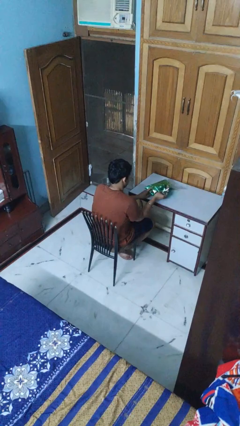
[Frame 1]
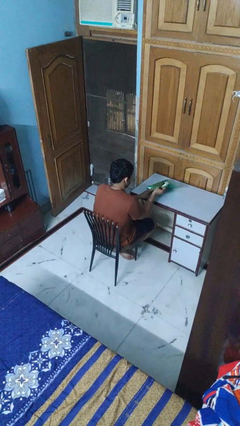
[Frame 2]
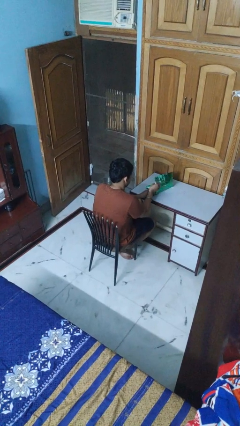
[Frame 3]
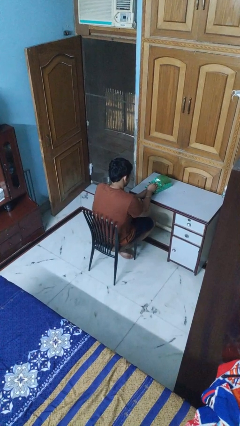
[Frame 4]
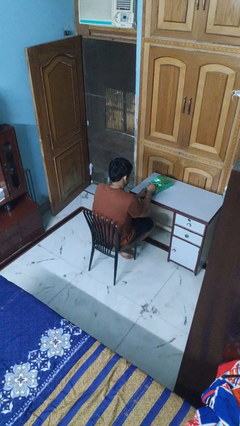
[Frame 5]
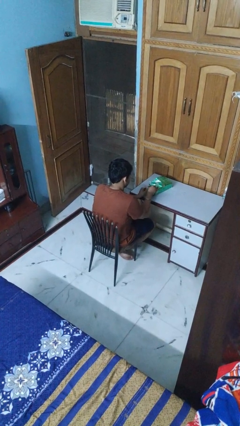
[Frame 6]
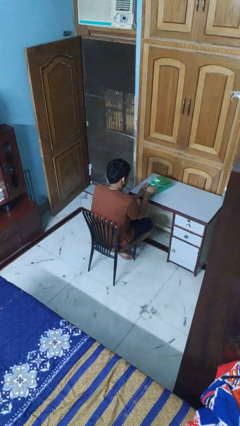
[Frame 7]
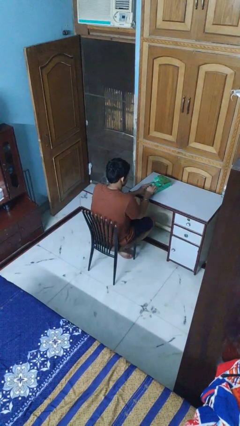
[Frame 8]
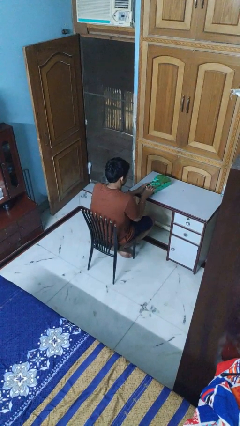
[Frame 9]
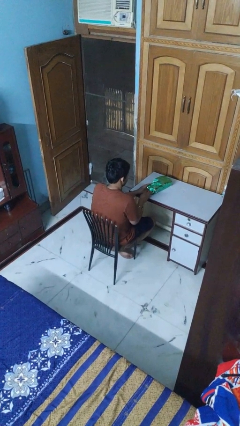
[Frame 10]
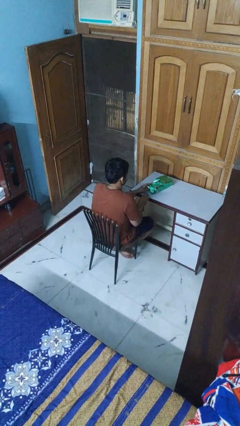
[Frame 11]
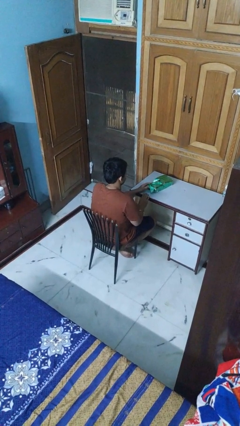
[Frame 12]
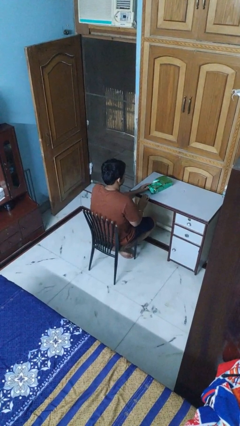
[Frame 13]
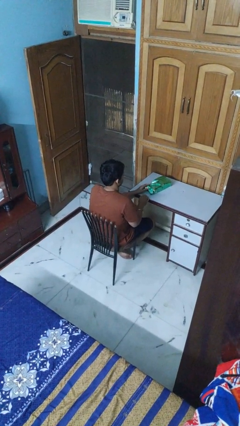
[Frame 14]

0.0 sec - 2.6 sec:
person wraps box

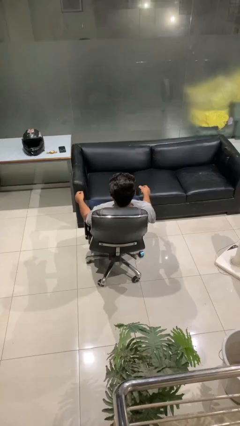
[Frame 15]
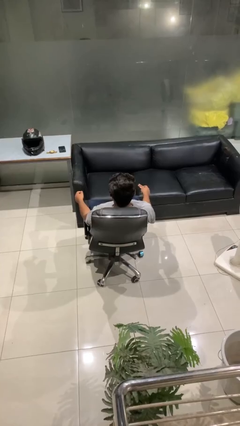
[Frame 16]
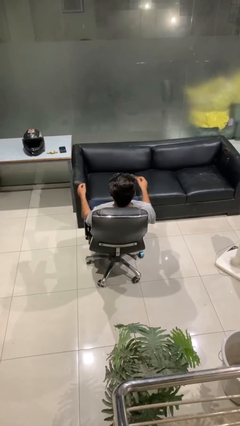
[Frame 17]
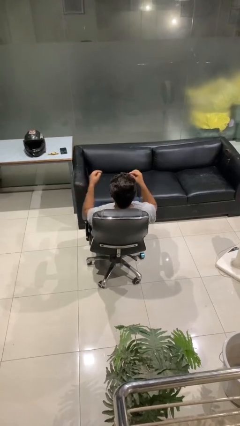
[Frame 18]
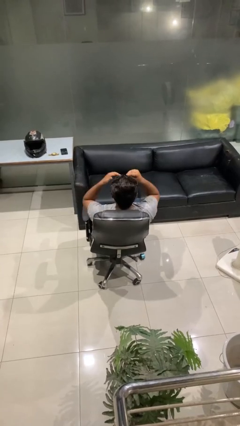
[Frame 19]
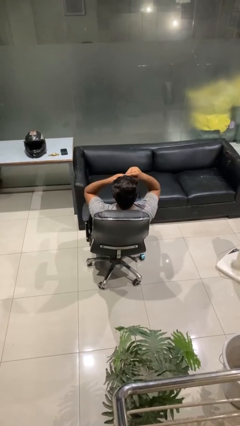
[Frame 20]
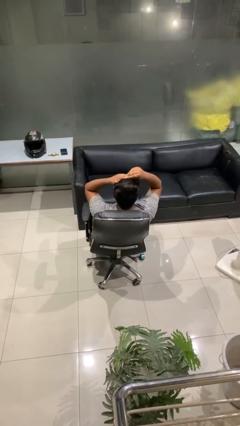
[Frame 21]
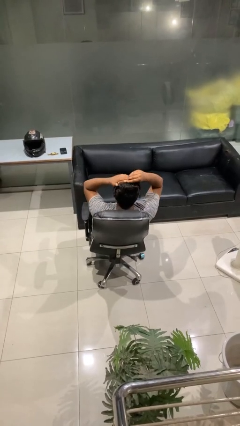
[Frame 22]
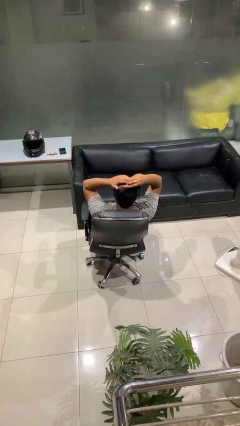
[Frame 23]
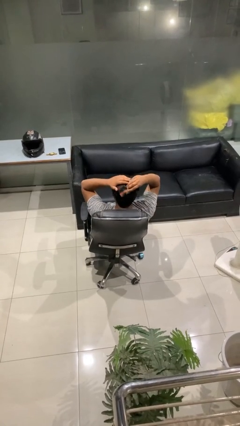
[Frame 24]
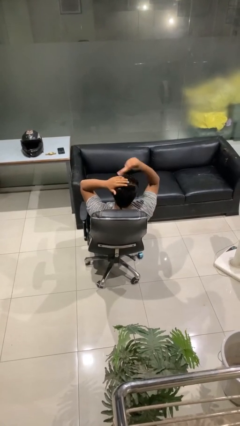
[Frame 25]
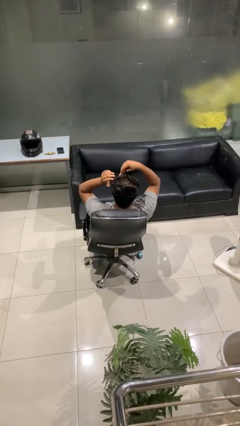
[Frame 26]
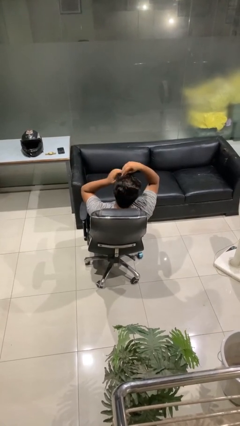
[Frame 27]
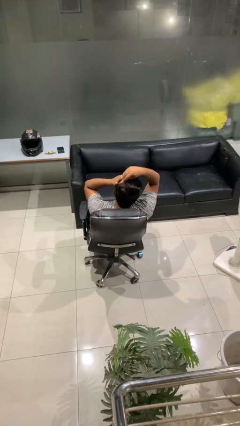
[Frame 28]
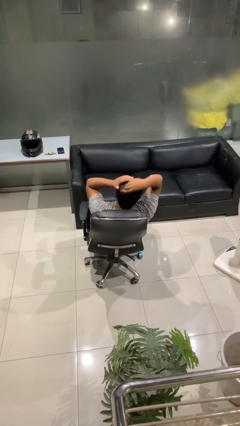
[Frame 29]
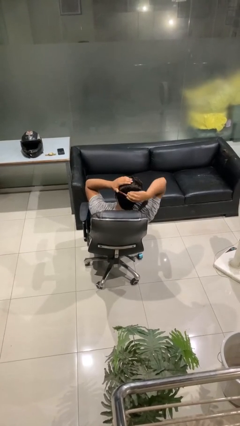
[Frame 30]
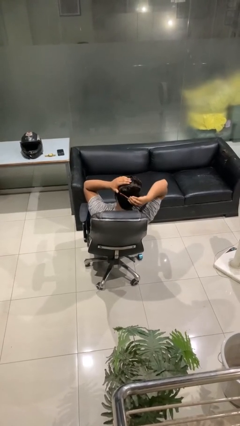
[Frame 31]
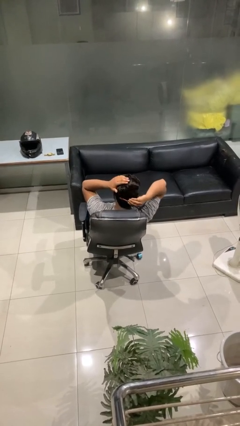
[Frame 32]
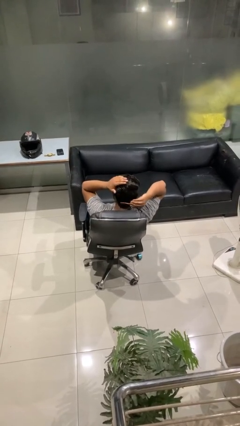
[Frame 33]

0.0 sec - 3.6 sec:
person brushes hair

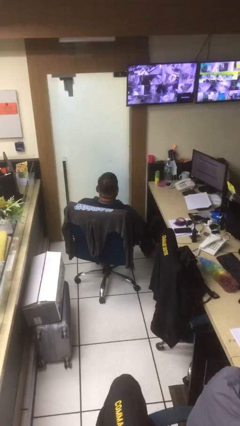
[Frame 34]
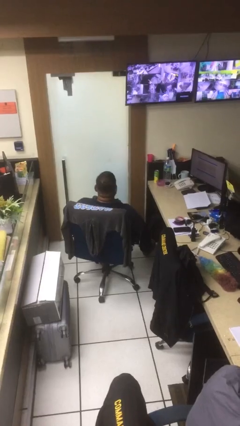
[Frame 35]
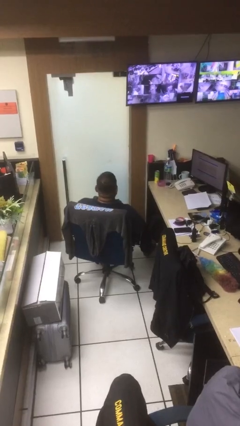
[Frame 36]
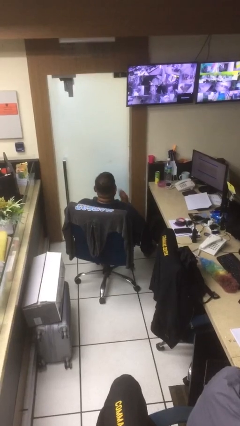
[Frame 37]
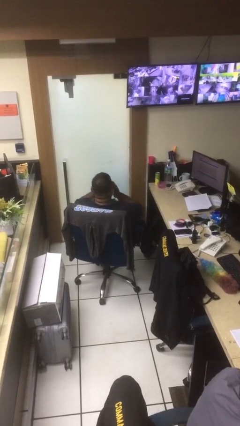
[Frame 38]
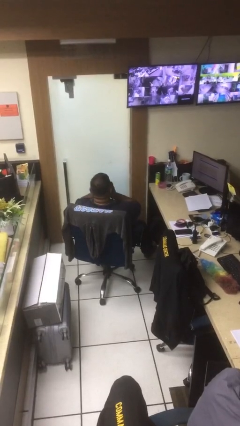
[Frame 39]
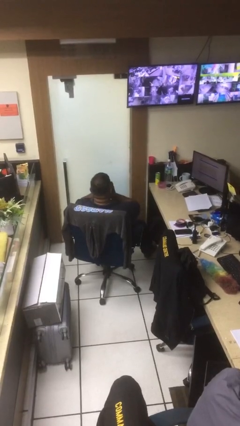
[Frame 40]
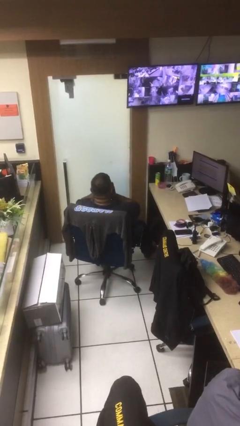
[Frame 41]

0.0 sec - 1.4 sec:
person covers face with hands

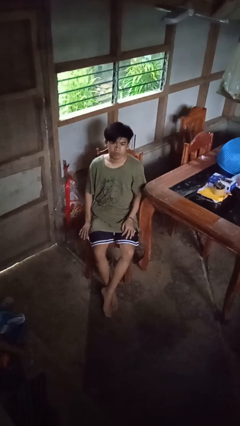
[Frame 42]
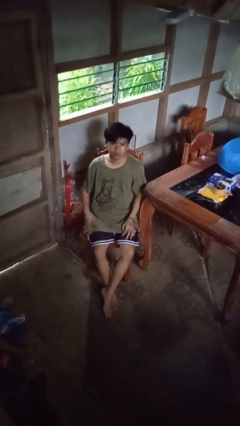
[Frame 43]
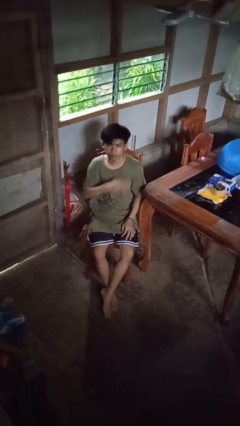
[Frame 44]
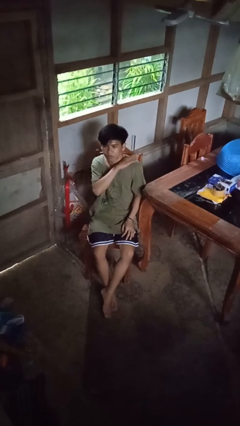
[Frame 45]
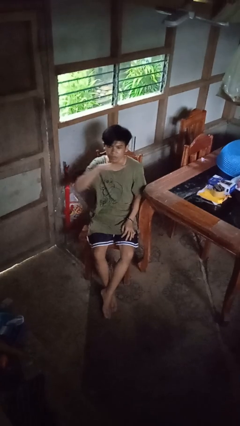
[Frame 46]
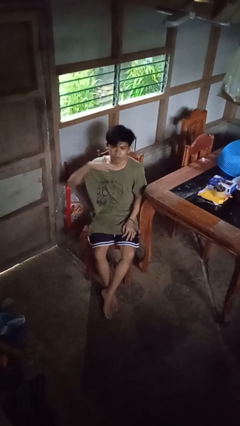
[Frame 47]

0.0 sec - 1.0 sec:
person gestures cut

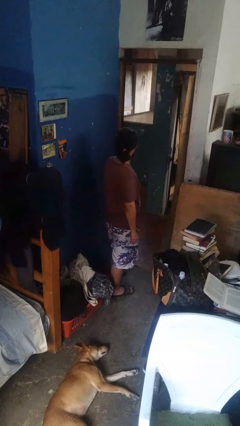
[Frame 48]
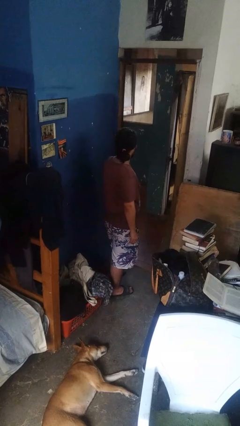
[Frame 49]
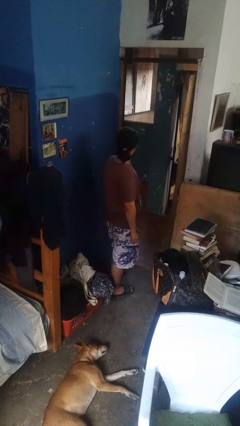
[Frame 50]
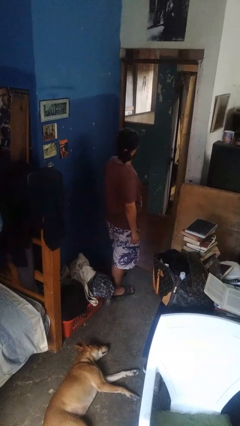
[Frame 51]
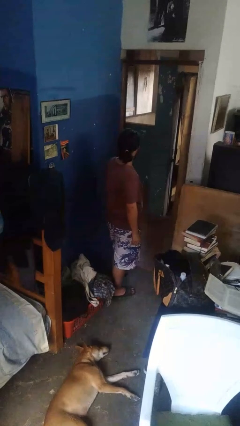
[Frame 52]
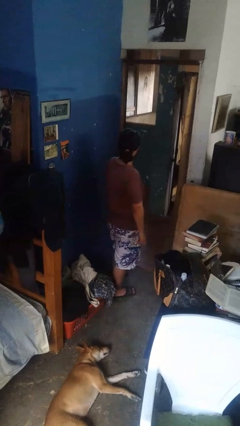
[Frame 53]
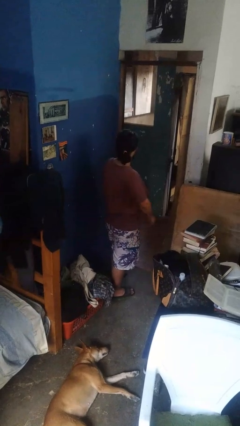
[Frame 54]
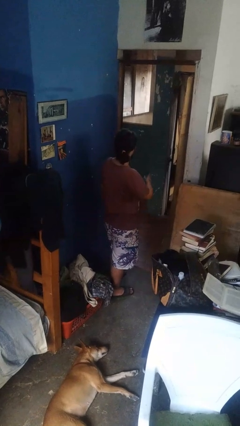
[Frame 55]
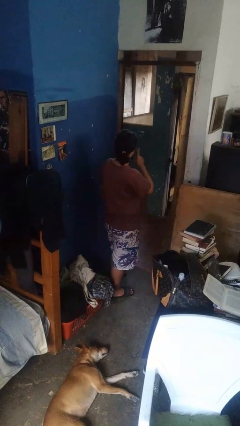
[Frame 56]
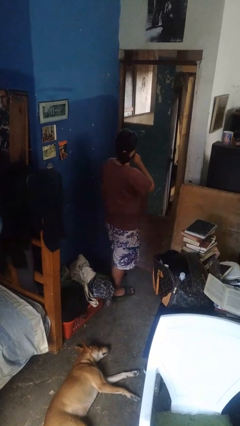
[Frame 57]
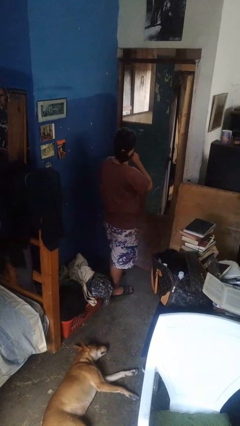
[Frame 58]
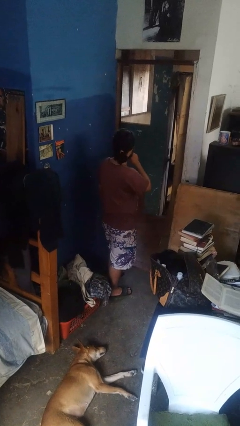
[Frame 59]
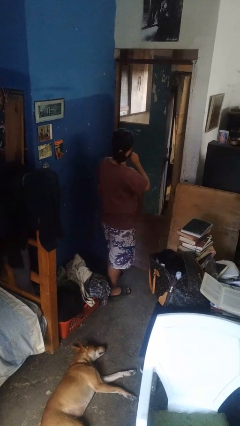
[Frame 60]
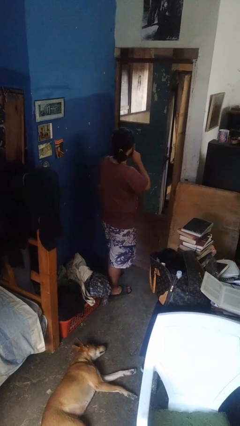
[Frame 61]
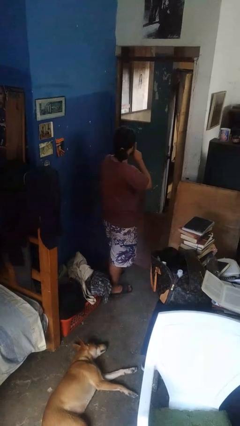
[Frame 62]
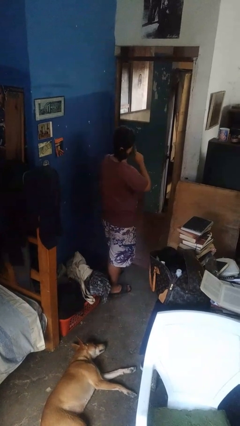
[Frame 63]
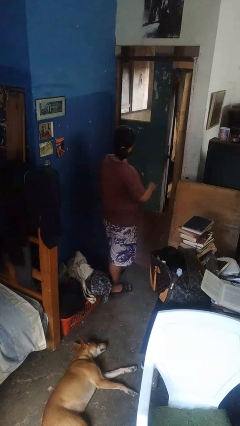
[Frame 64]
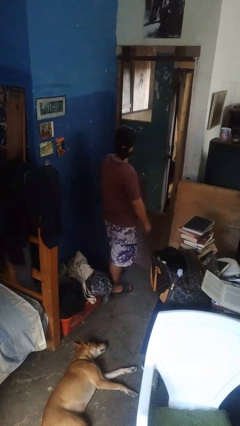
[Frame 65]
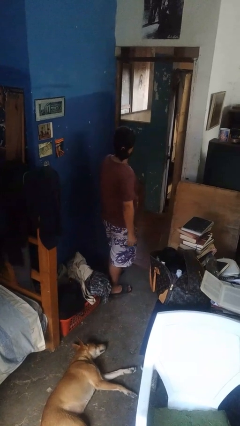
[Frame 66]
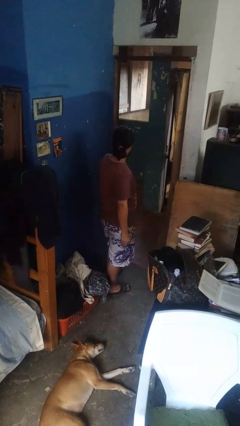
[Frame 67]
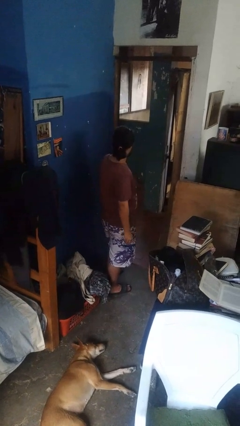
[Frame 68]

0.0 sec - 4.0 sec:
person gestures be quiet

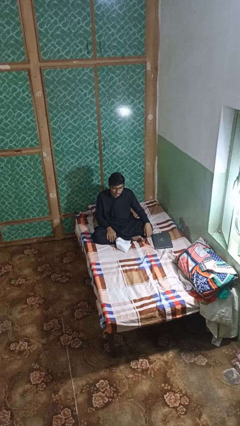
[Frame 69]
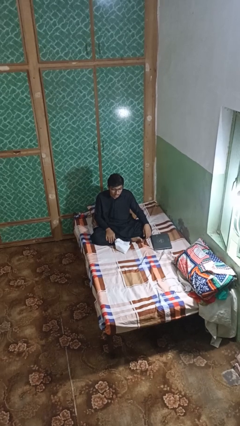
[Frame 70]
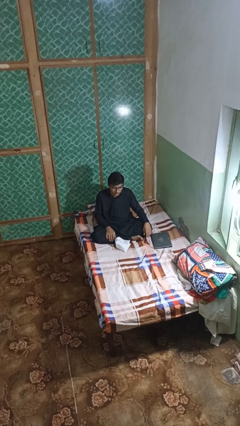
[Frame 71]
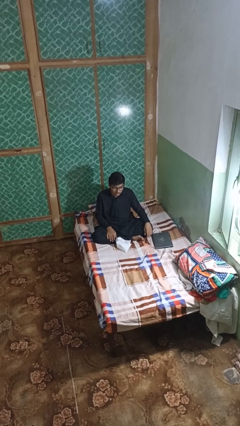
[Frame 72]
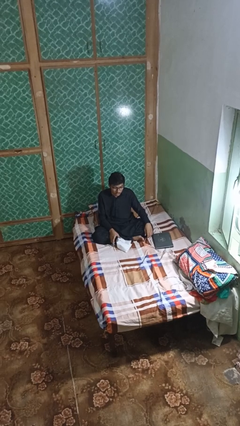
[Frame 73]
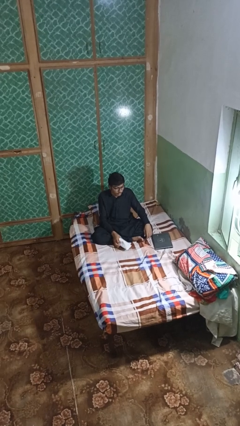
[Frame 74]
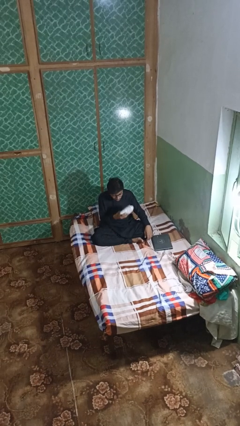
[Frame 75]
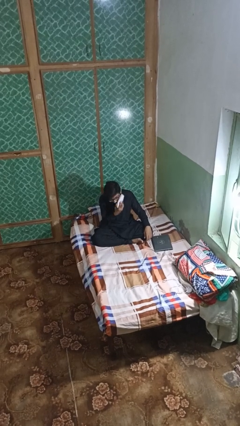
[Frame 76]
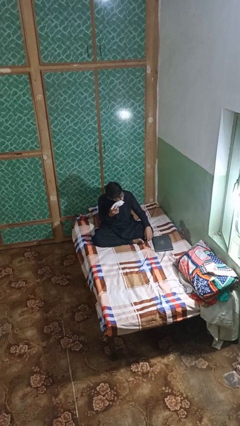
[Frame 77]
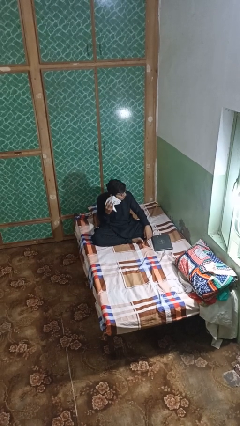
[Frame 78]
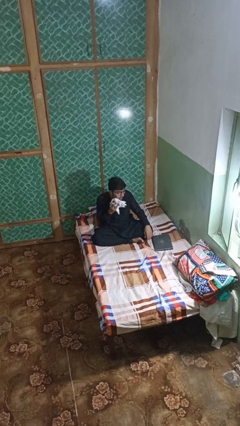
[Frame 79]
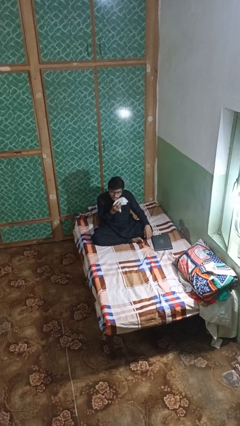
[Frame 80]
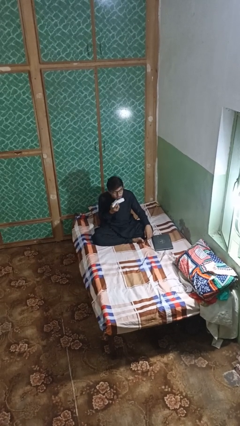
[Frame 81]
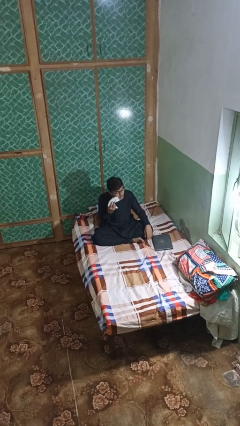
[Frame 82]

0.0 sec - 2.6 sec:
person wipes mouth with napkin

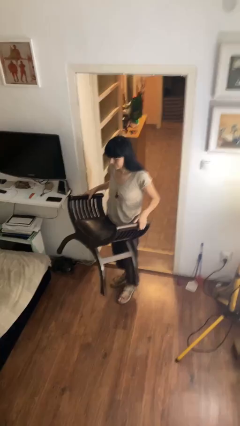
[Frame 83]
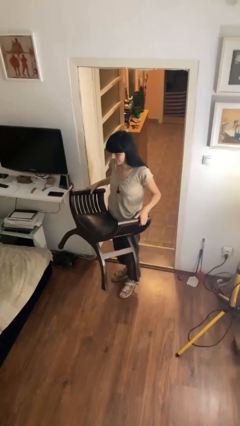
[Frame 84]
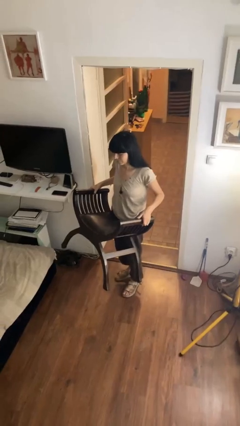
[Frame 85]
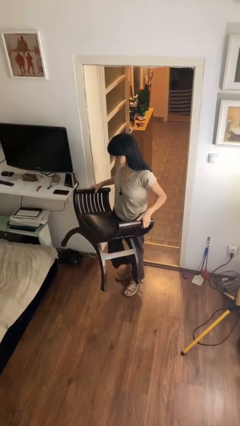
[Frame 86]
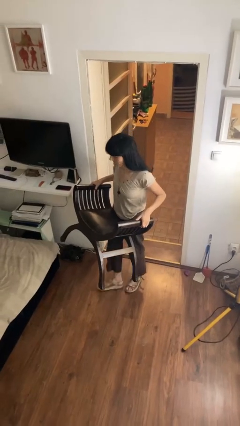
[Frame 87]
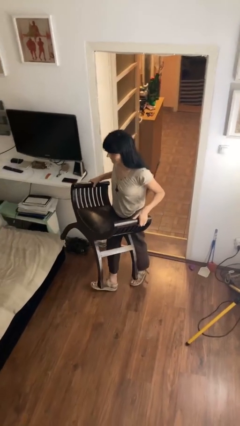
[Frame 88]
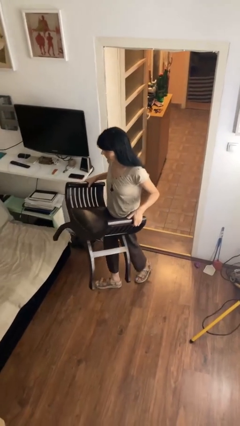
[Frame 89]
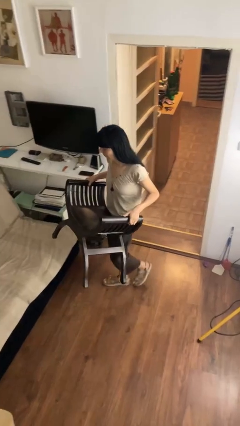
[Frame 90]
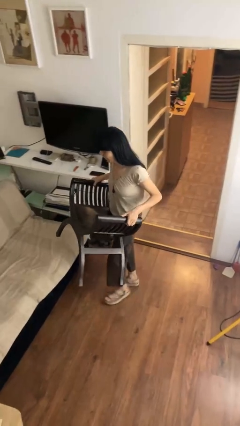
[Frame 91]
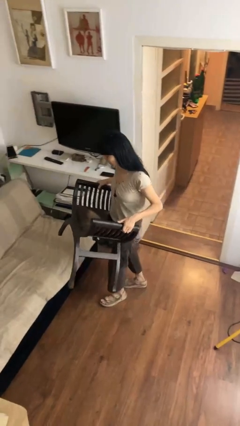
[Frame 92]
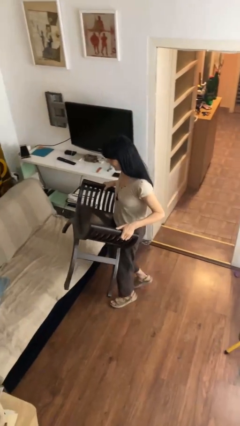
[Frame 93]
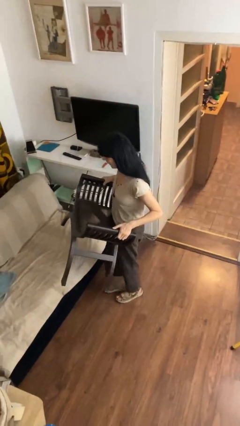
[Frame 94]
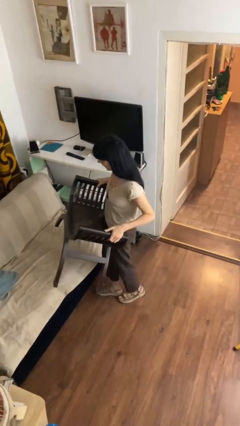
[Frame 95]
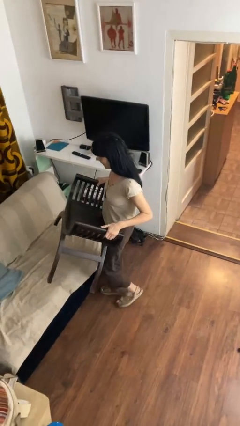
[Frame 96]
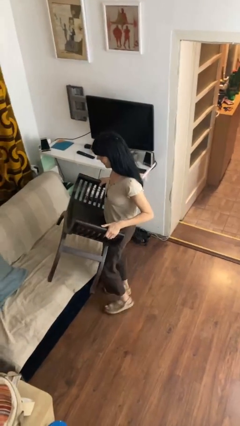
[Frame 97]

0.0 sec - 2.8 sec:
person carries furniture
